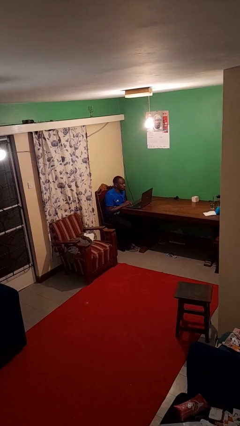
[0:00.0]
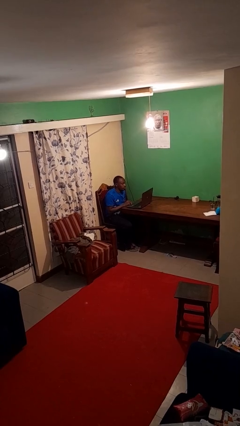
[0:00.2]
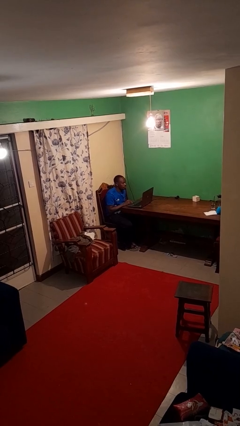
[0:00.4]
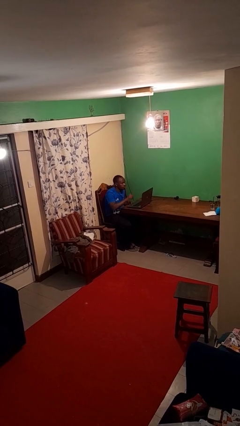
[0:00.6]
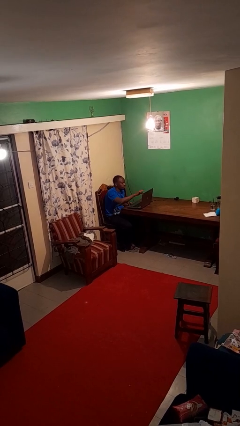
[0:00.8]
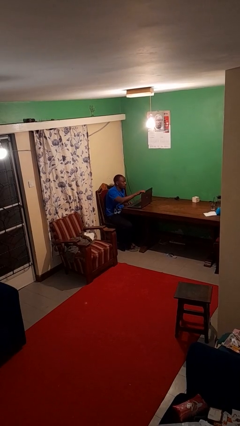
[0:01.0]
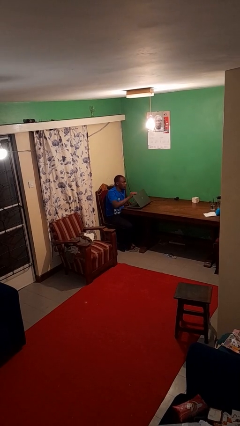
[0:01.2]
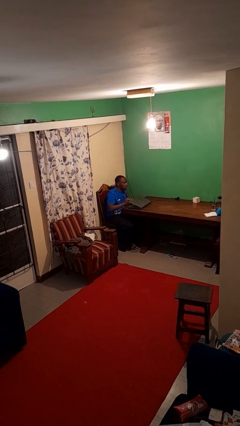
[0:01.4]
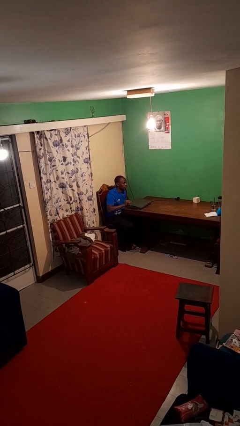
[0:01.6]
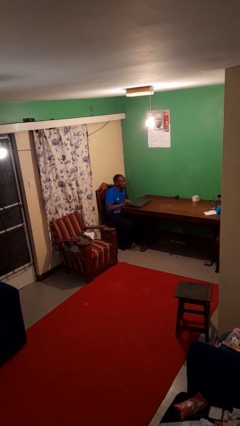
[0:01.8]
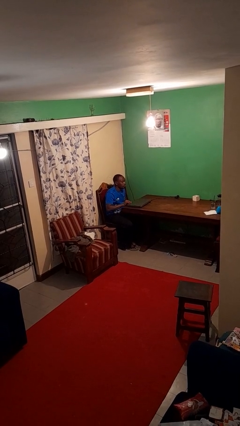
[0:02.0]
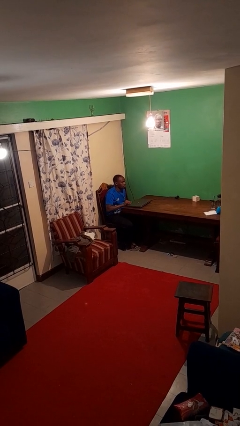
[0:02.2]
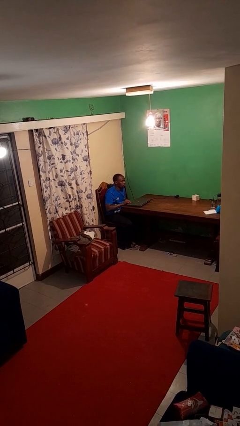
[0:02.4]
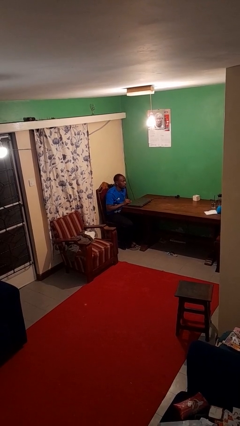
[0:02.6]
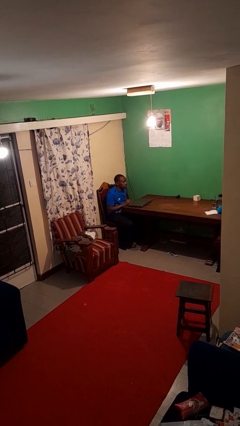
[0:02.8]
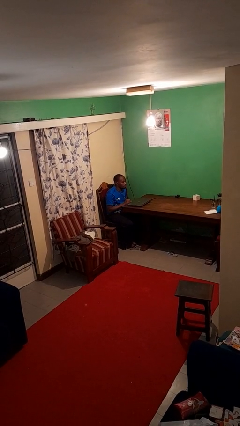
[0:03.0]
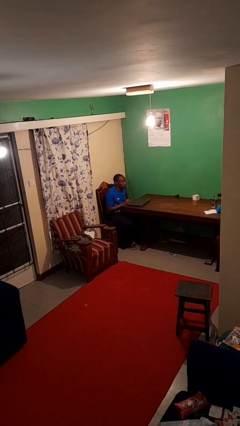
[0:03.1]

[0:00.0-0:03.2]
person closes laptop

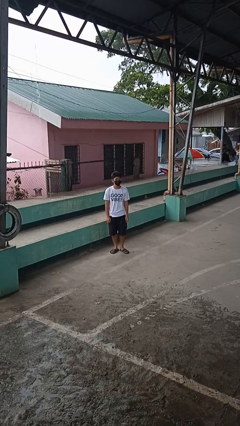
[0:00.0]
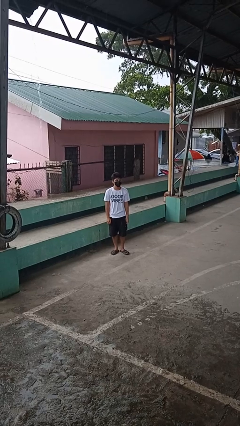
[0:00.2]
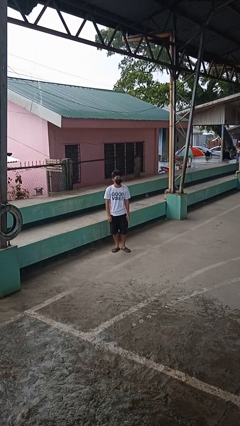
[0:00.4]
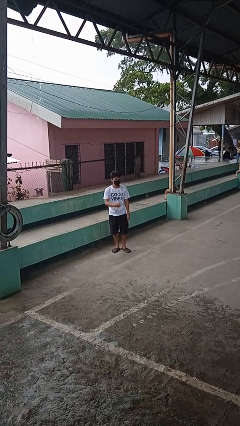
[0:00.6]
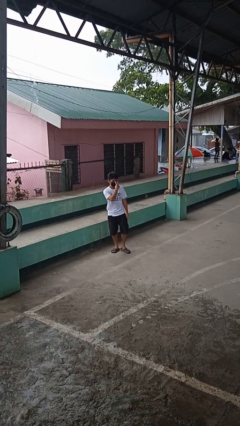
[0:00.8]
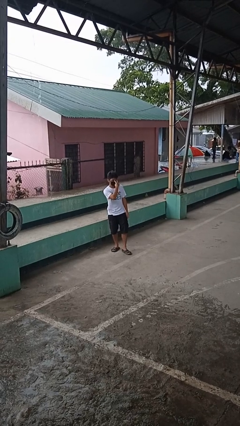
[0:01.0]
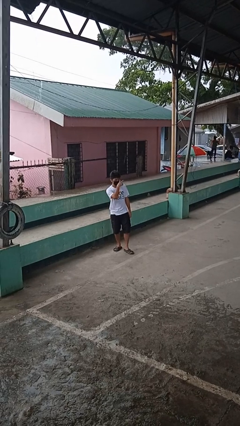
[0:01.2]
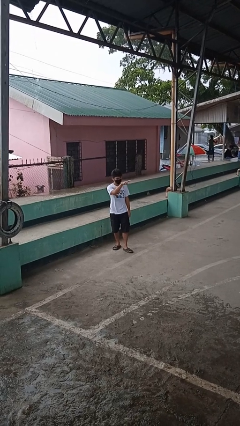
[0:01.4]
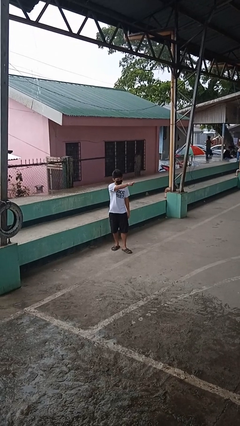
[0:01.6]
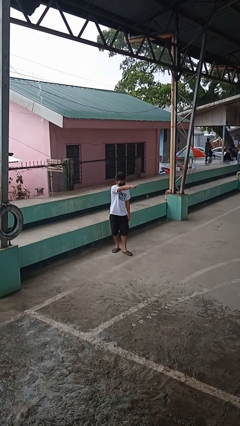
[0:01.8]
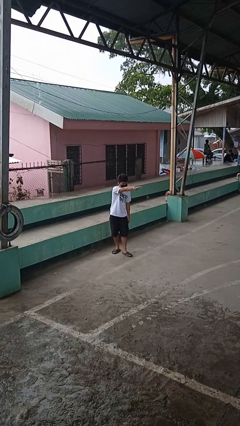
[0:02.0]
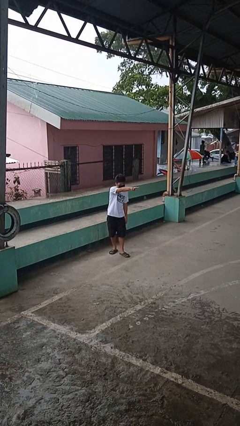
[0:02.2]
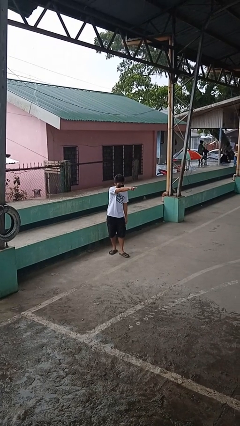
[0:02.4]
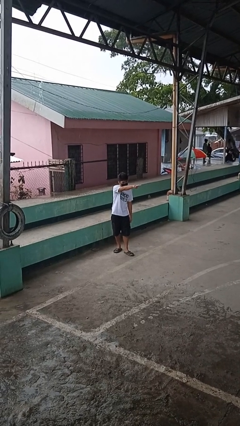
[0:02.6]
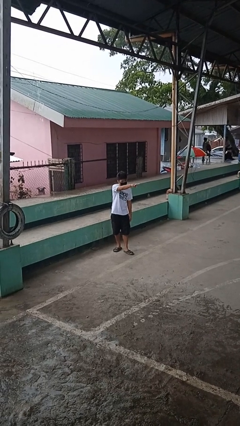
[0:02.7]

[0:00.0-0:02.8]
person gestures watch closely

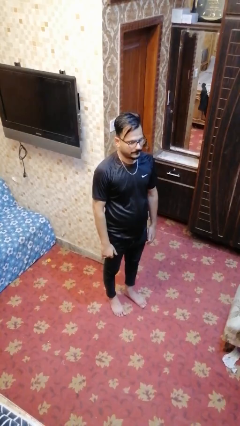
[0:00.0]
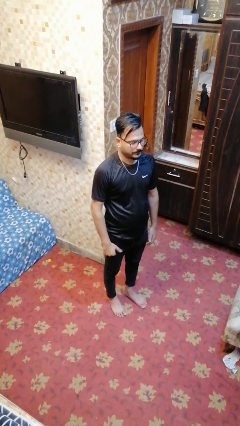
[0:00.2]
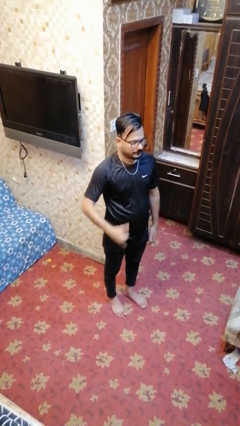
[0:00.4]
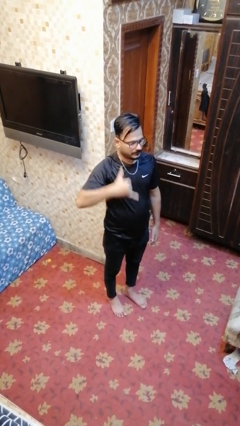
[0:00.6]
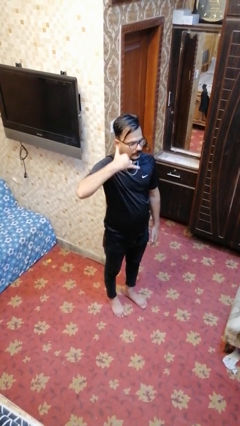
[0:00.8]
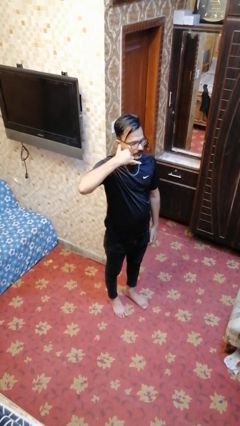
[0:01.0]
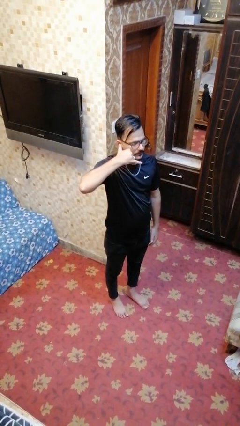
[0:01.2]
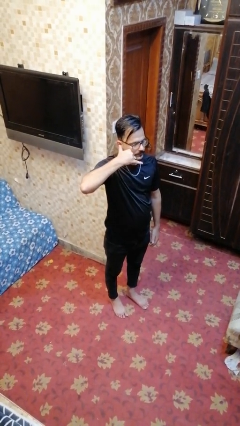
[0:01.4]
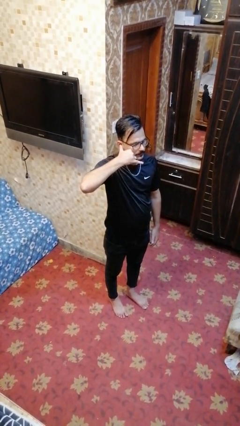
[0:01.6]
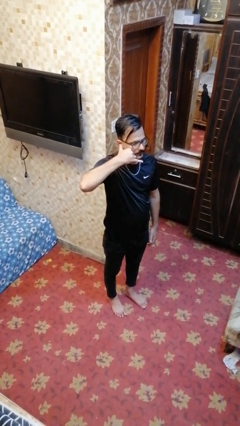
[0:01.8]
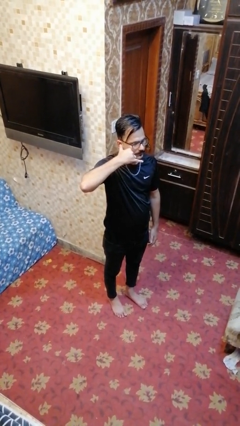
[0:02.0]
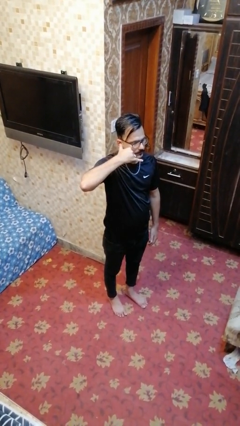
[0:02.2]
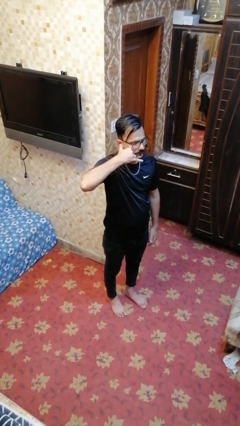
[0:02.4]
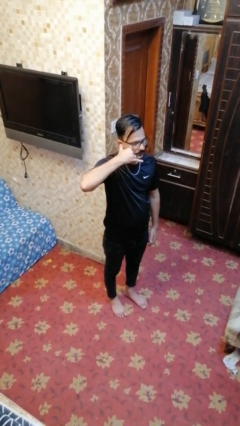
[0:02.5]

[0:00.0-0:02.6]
person gestures call me

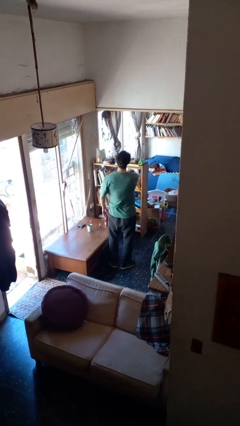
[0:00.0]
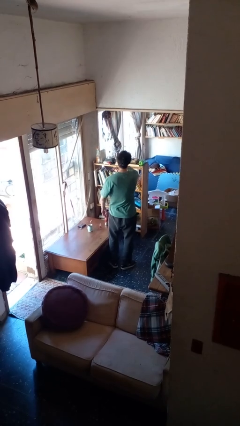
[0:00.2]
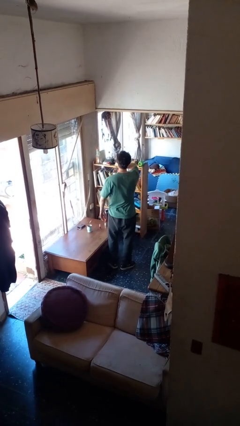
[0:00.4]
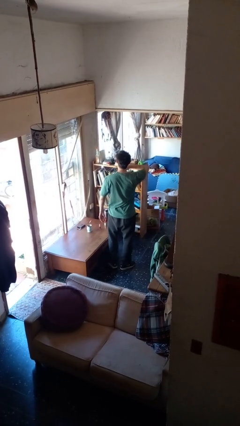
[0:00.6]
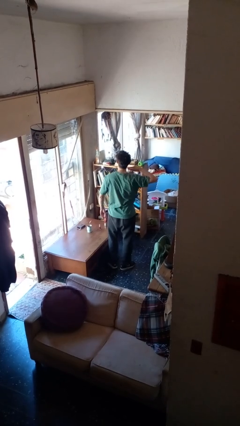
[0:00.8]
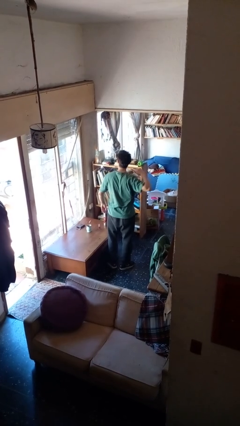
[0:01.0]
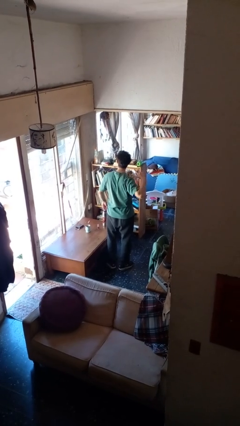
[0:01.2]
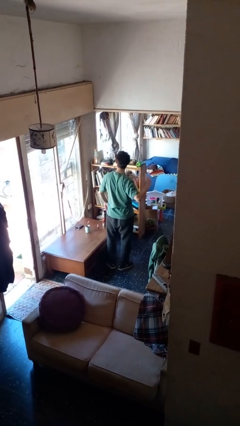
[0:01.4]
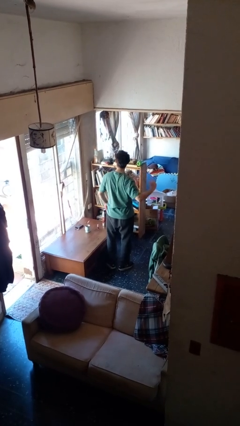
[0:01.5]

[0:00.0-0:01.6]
person gestures cut

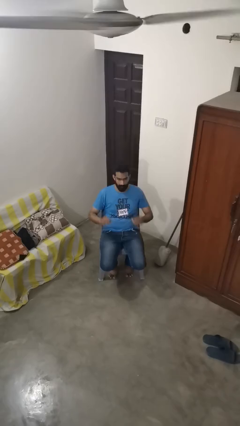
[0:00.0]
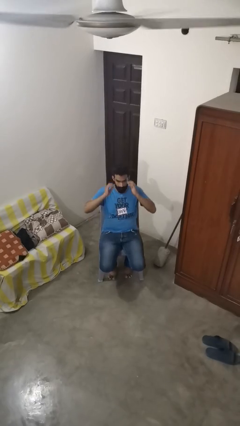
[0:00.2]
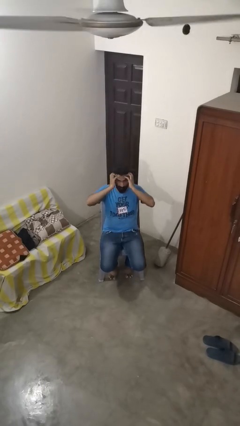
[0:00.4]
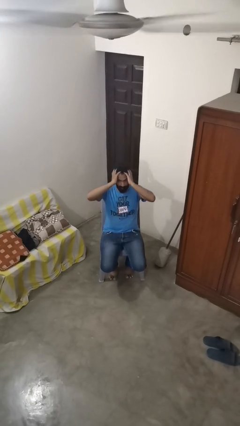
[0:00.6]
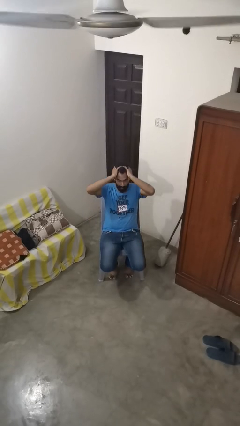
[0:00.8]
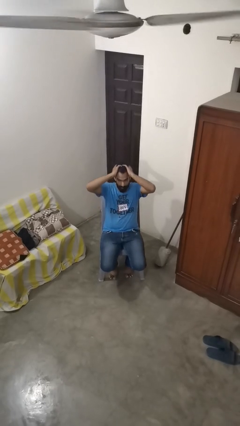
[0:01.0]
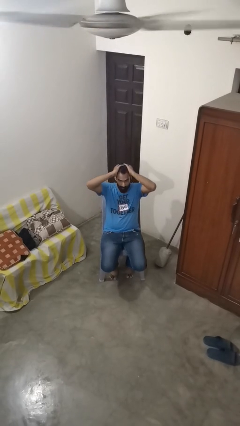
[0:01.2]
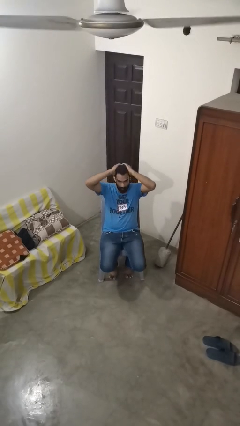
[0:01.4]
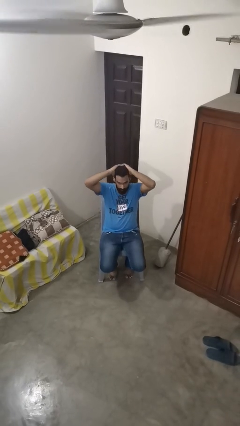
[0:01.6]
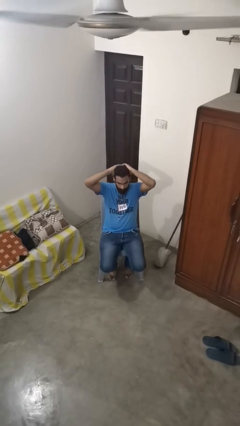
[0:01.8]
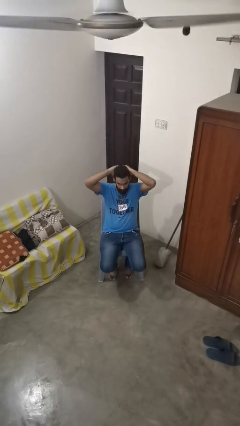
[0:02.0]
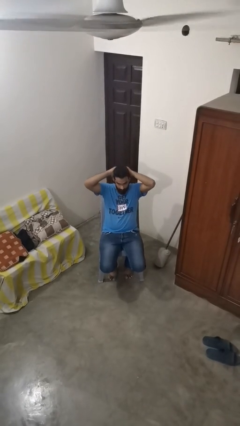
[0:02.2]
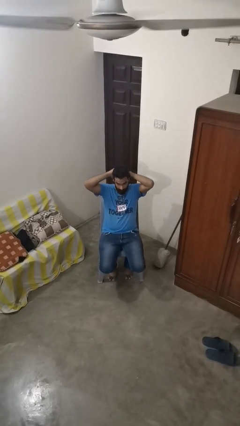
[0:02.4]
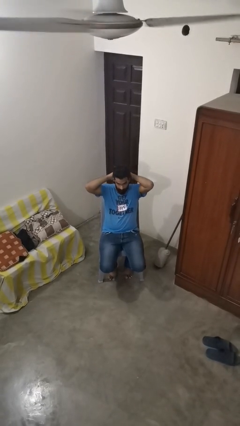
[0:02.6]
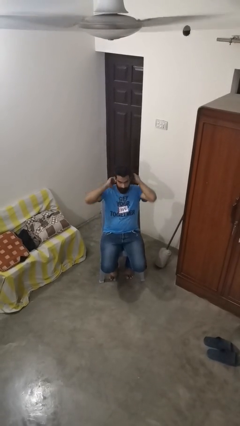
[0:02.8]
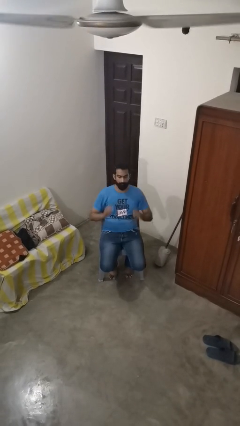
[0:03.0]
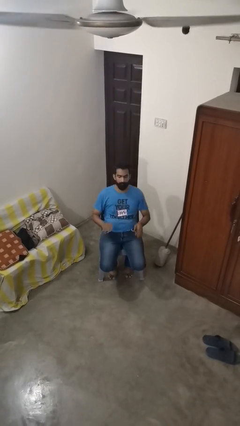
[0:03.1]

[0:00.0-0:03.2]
person strokes hair

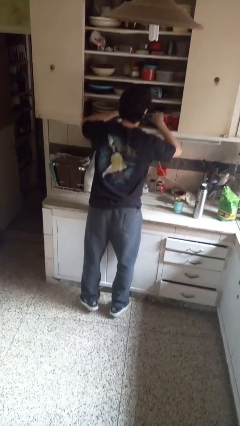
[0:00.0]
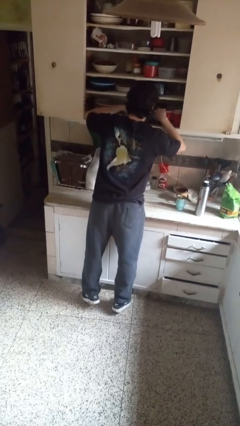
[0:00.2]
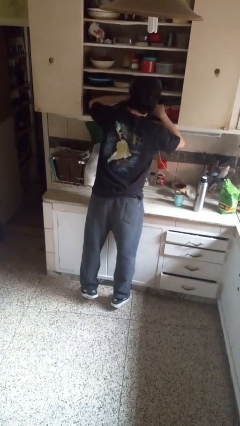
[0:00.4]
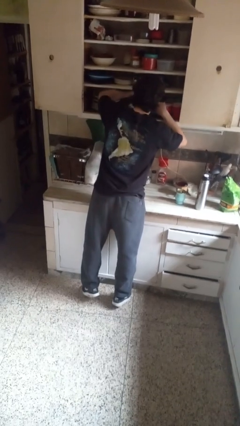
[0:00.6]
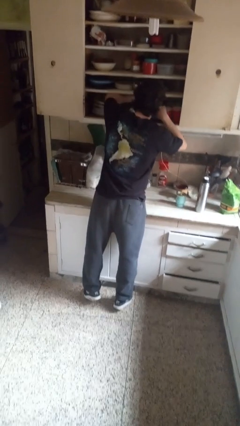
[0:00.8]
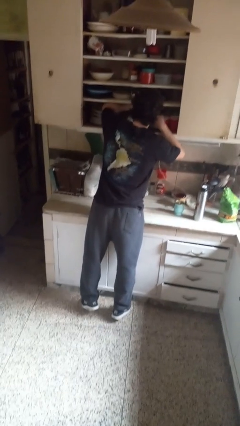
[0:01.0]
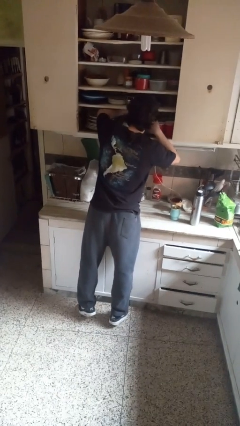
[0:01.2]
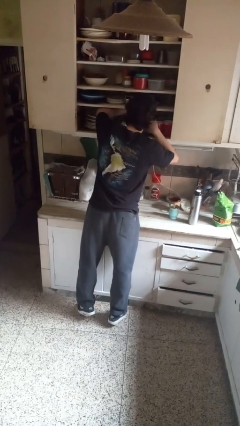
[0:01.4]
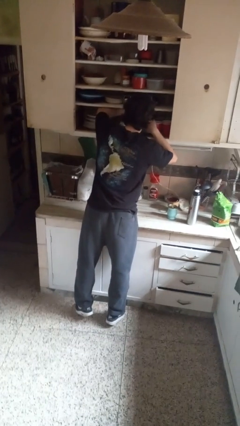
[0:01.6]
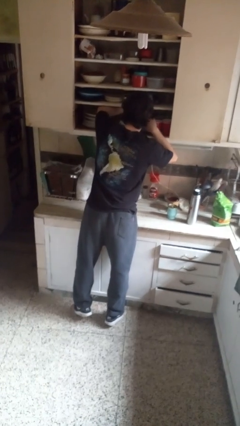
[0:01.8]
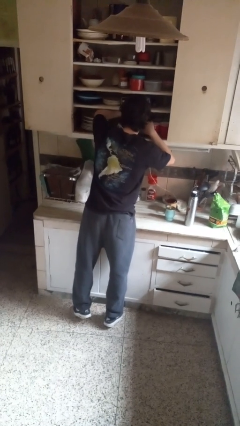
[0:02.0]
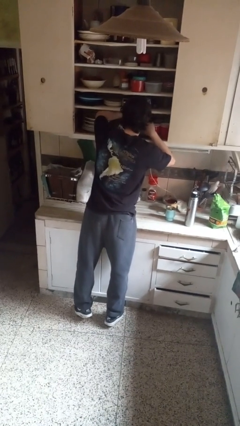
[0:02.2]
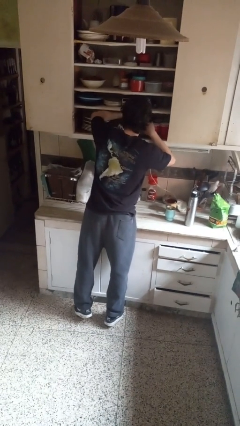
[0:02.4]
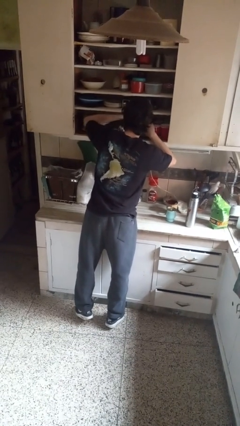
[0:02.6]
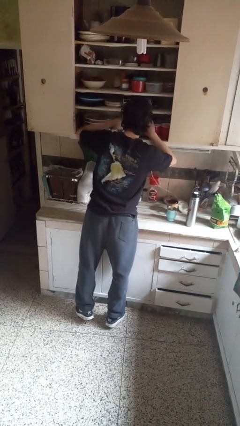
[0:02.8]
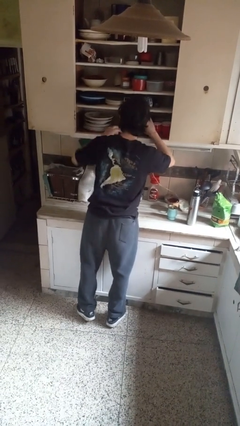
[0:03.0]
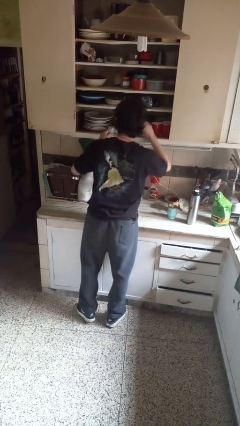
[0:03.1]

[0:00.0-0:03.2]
person searches in cabinet

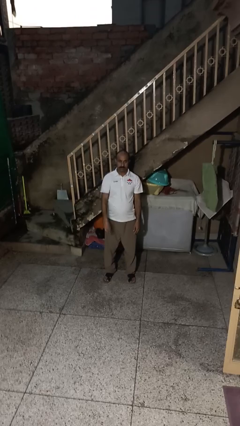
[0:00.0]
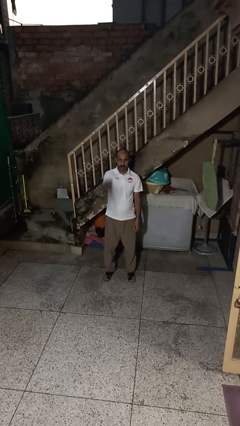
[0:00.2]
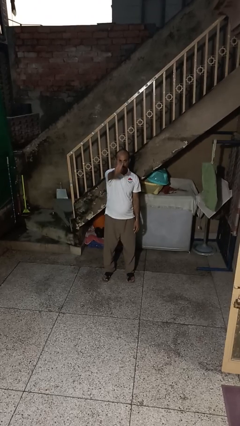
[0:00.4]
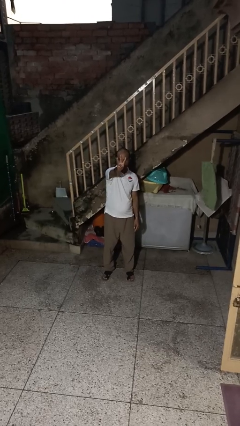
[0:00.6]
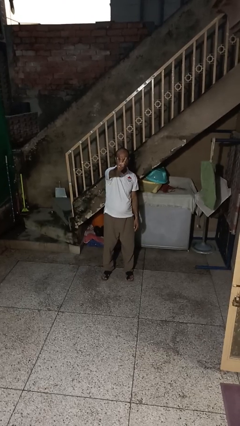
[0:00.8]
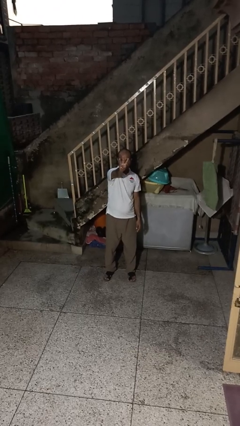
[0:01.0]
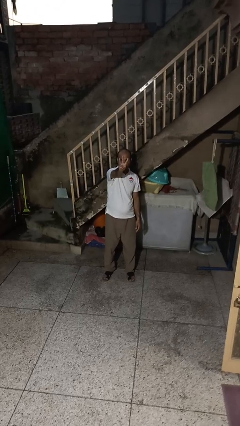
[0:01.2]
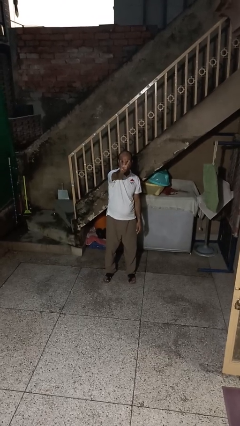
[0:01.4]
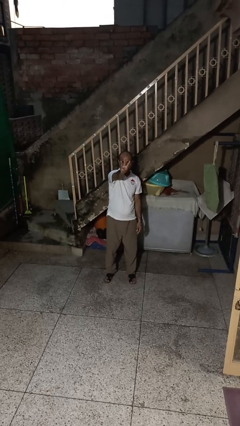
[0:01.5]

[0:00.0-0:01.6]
person gestures number three
